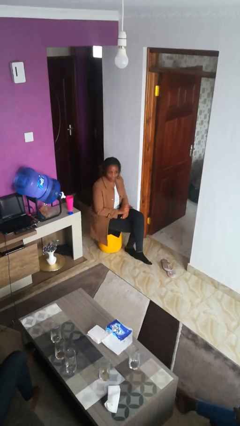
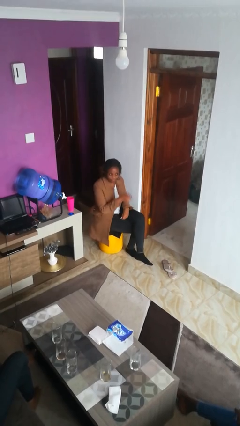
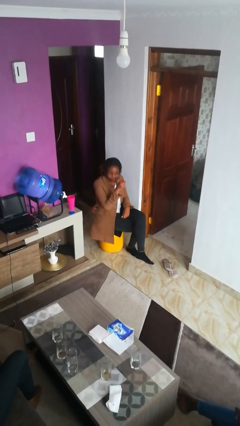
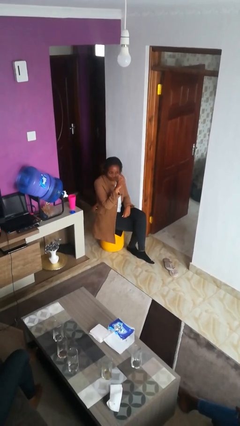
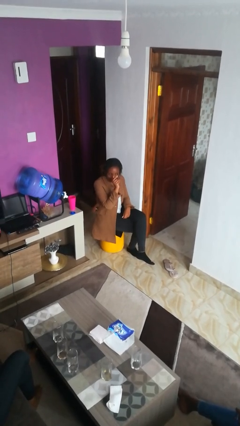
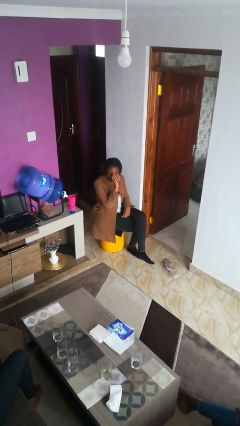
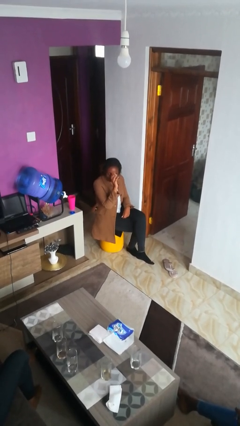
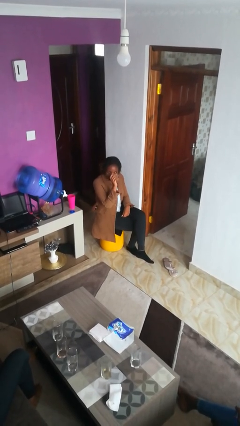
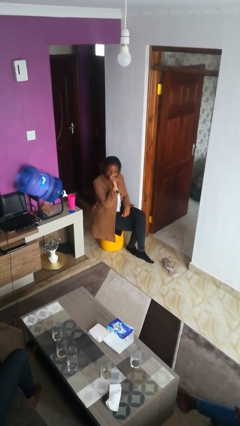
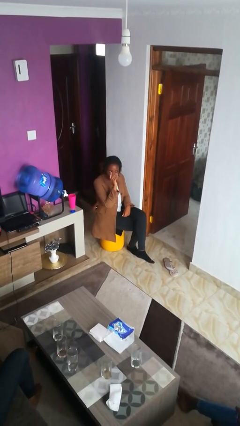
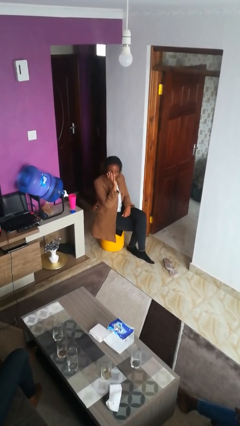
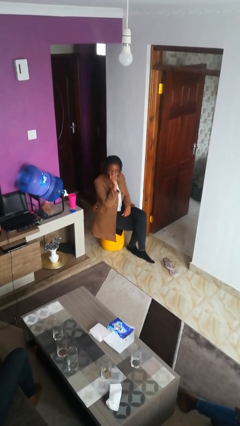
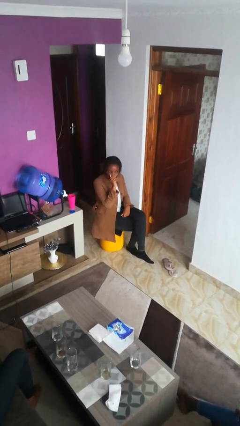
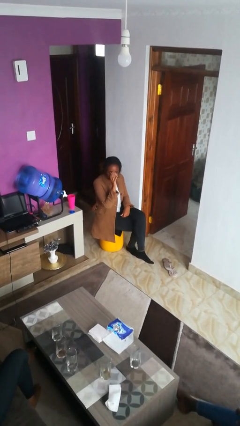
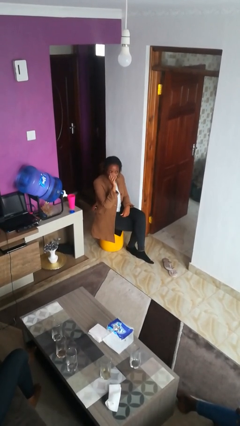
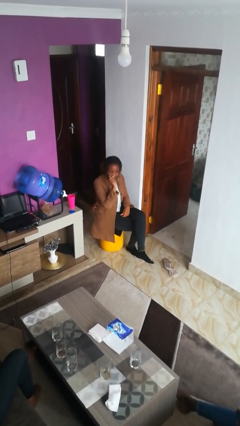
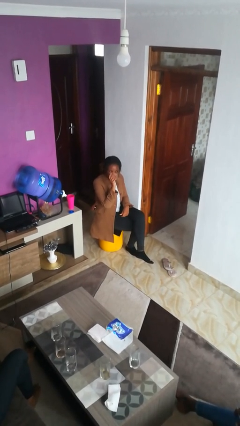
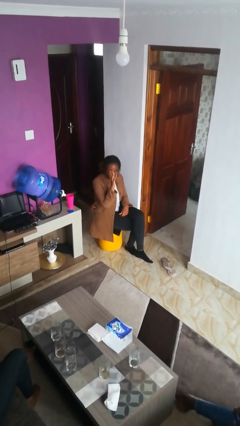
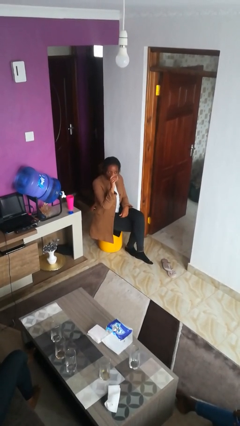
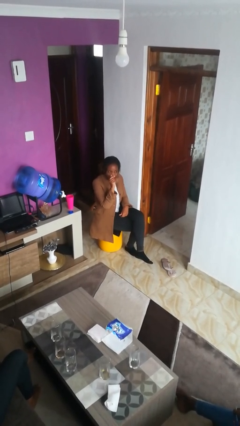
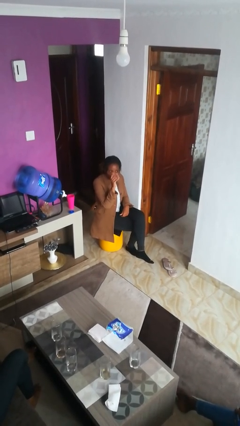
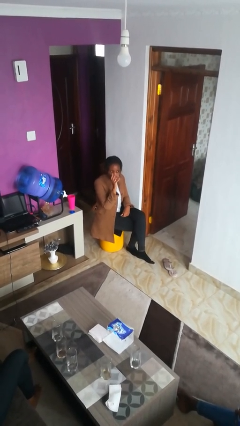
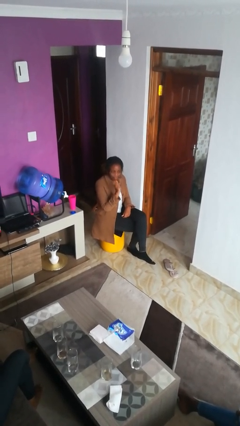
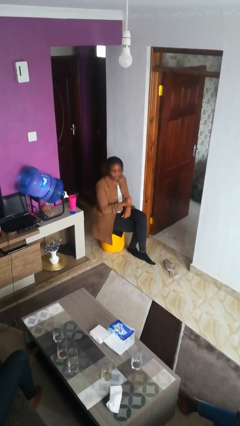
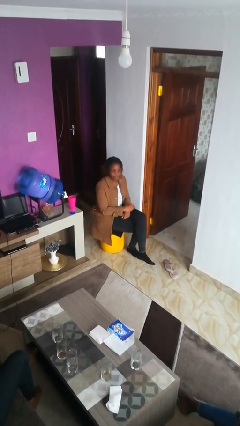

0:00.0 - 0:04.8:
person gestures come here

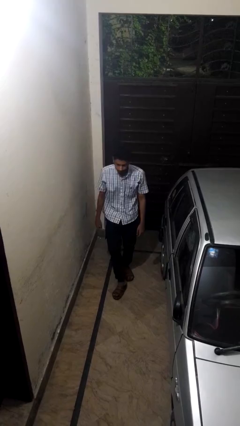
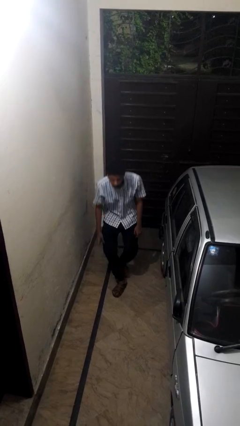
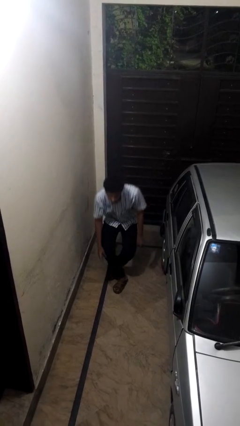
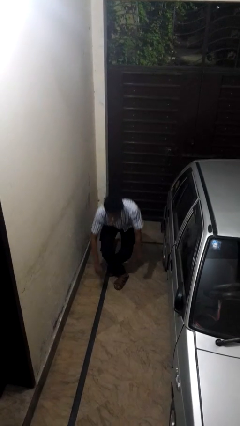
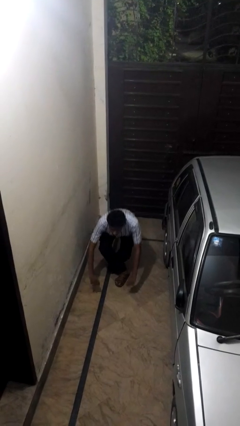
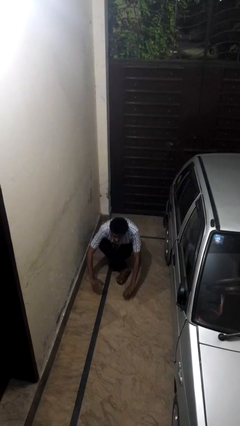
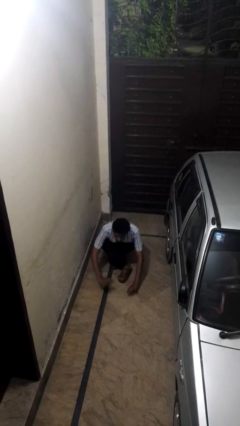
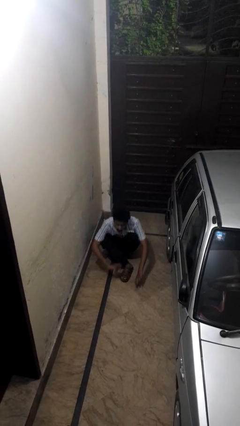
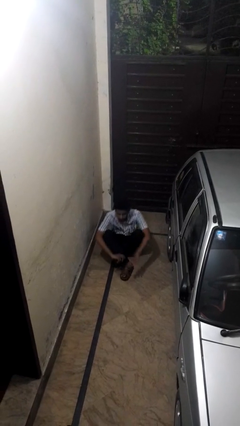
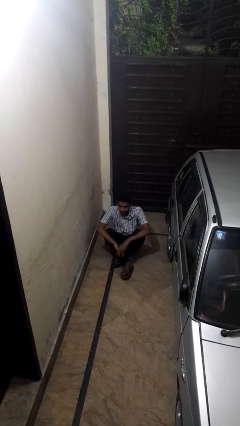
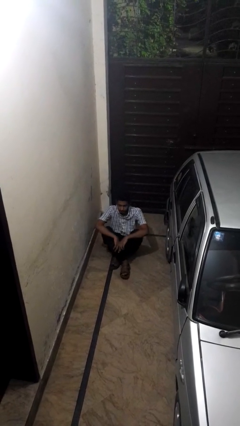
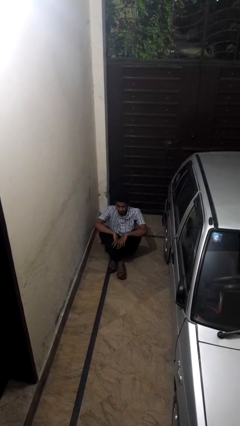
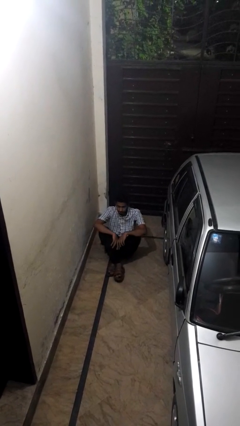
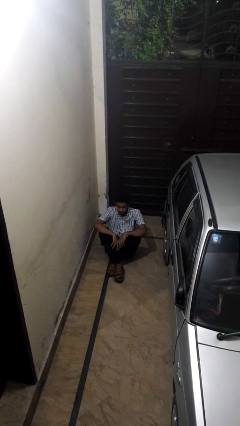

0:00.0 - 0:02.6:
person sits crisscross

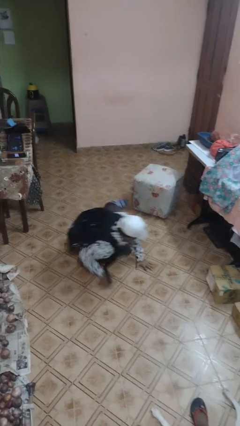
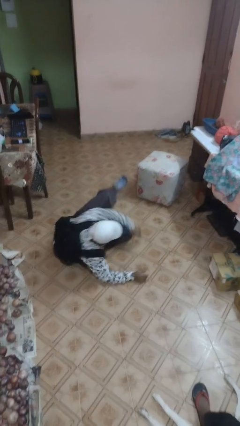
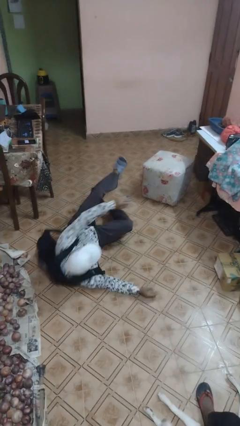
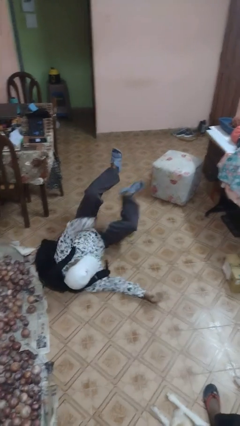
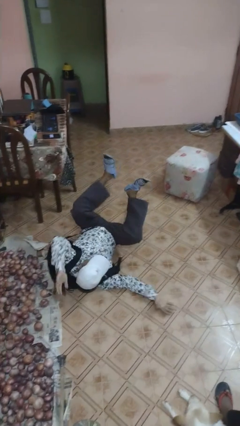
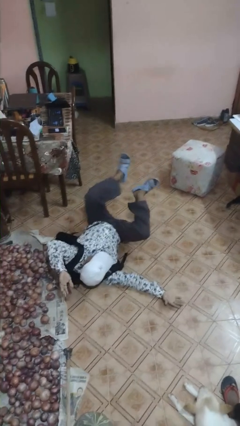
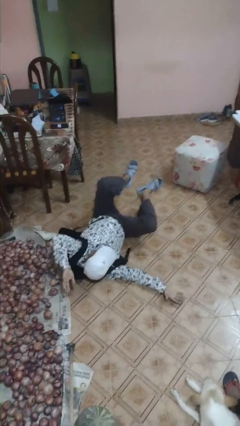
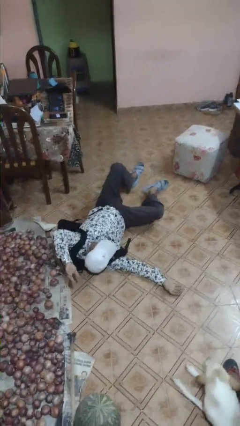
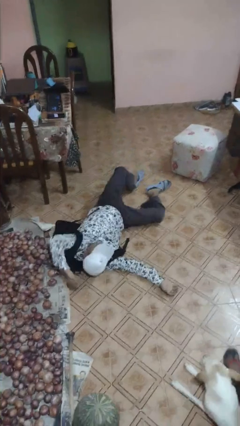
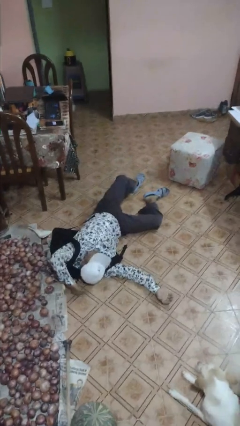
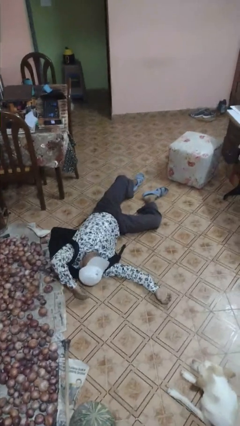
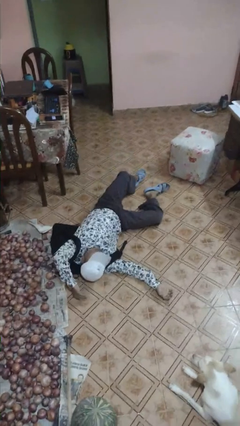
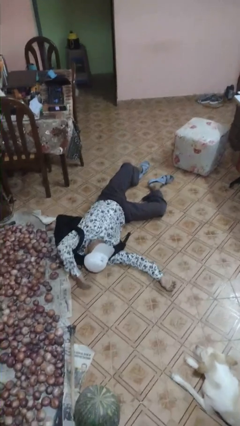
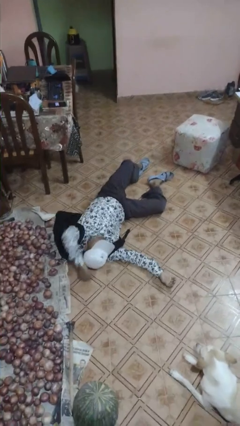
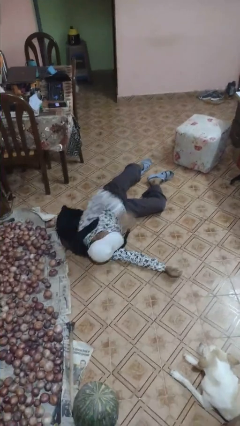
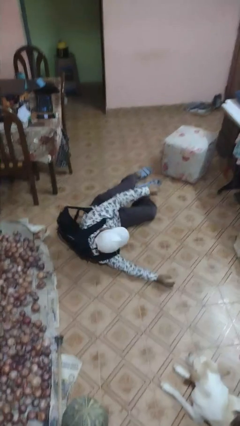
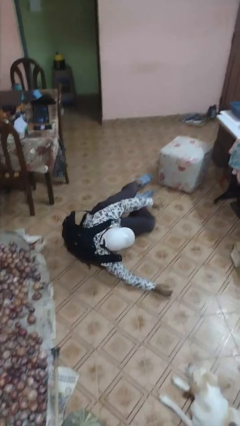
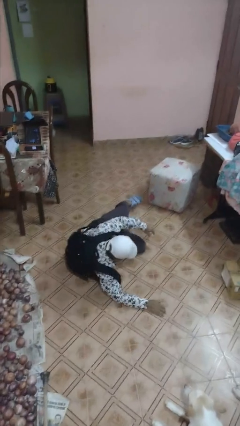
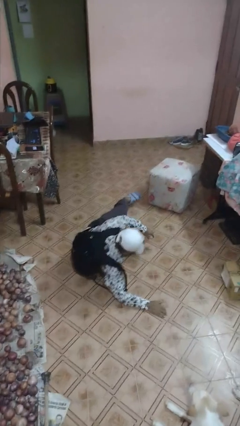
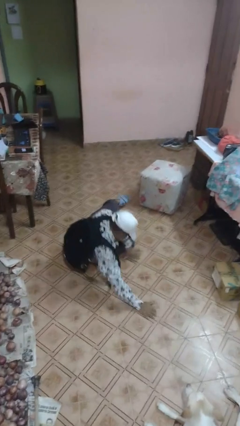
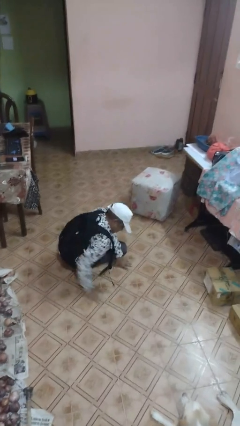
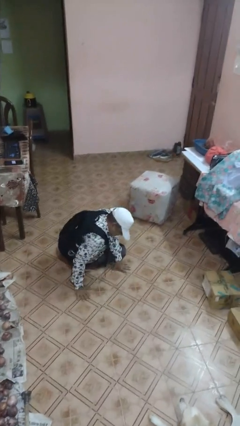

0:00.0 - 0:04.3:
person lies down on floor

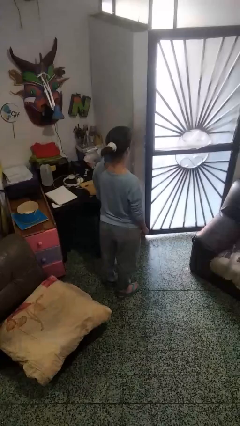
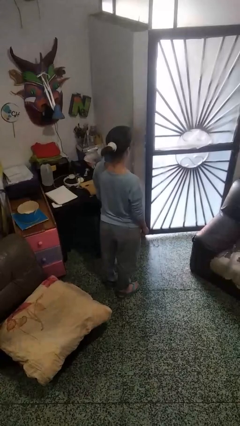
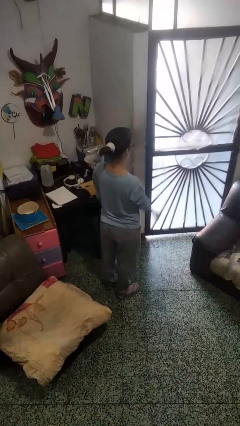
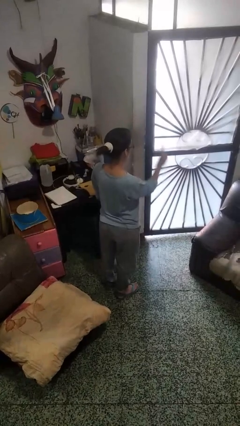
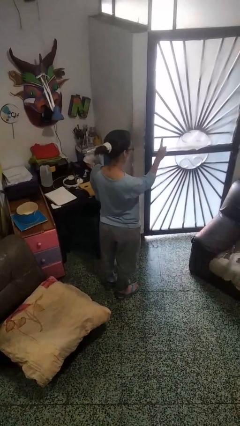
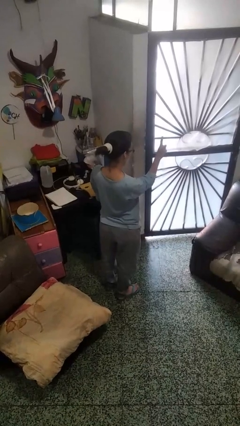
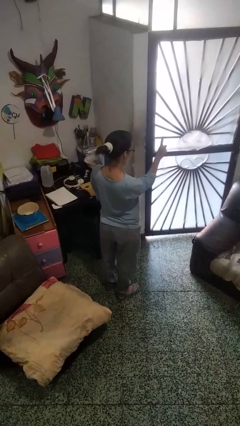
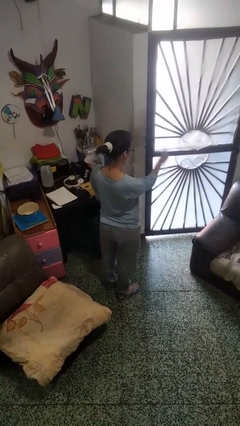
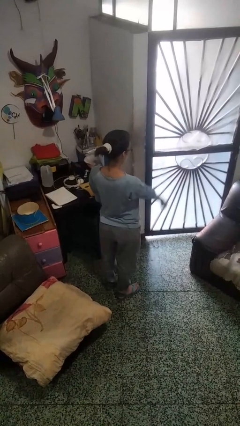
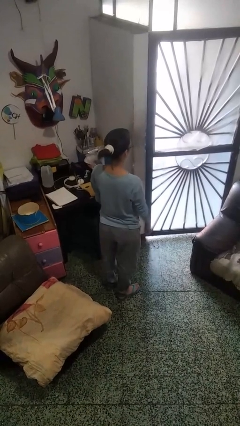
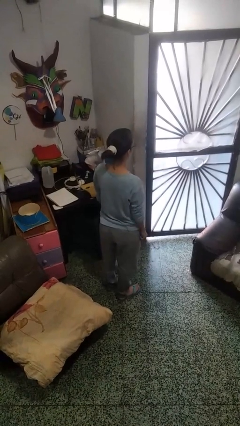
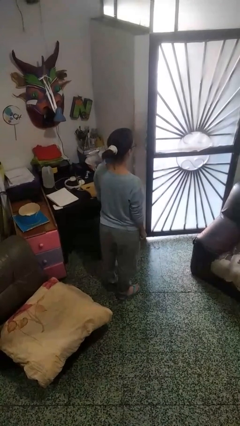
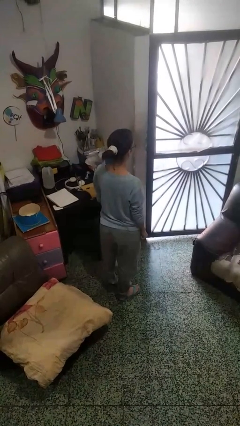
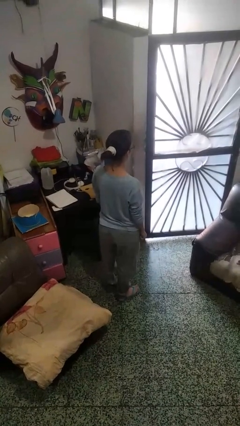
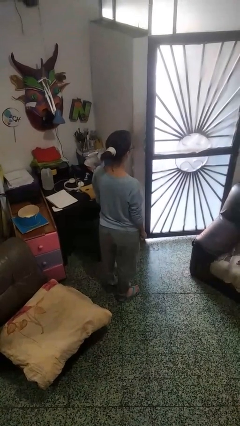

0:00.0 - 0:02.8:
person gestures number one

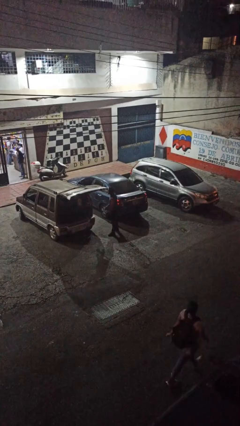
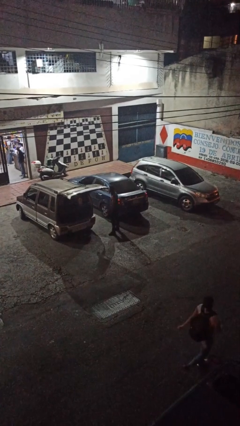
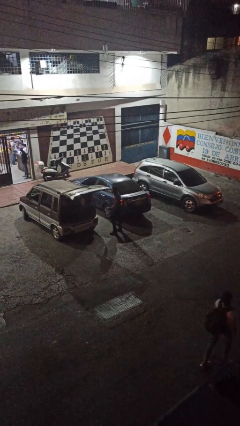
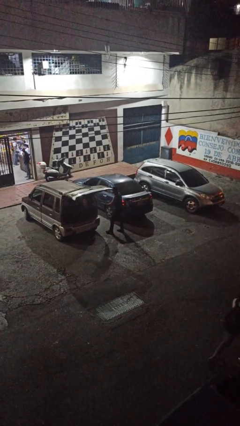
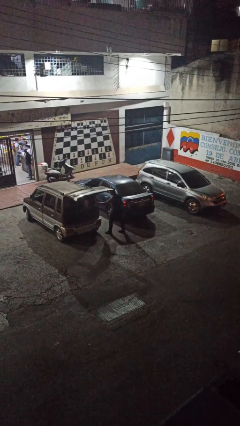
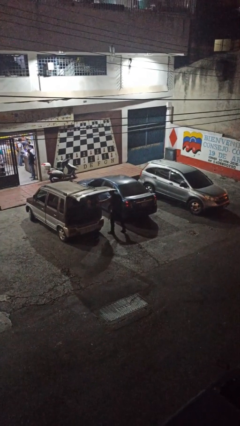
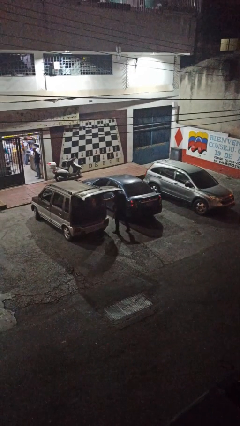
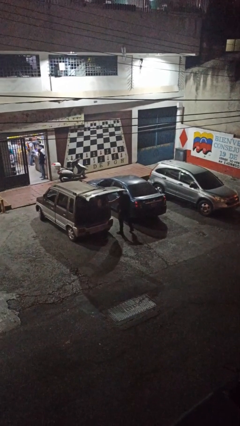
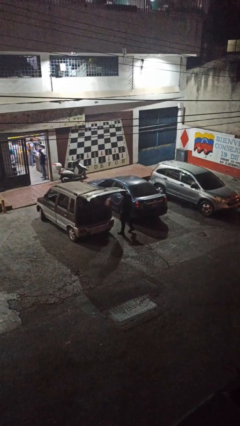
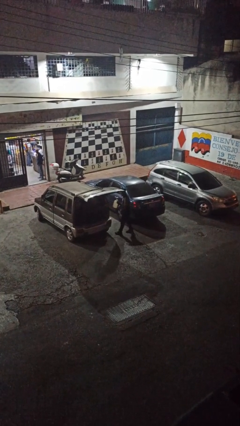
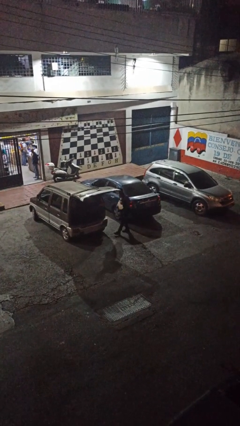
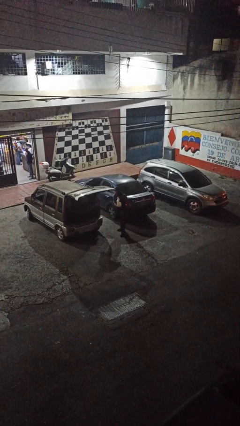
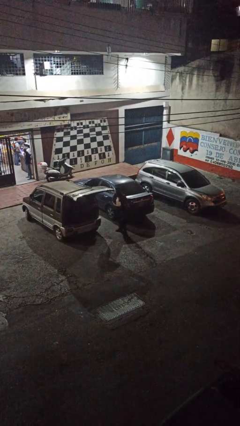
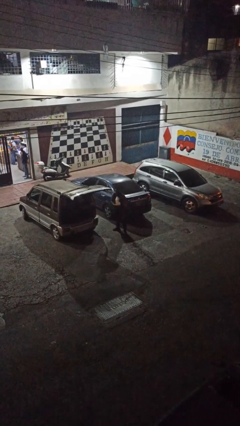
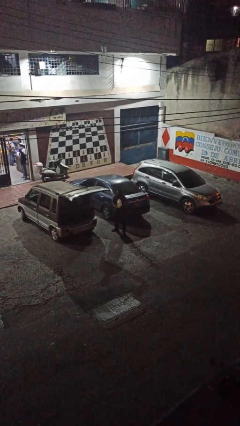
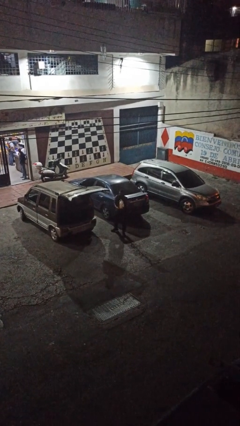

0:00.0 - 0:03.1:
person unloads car

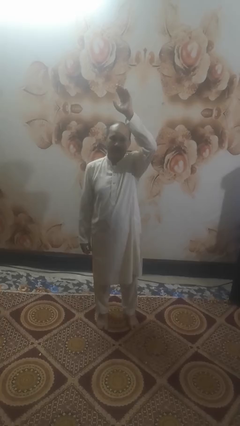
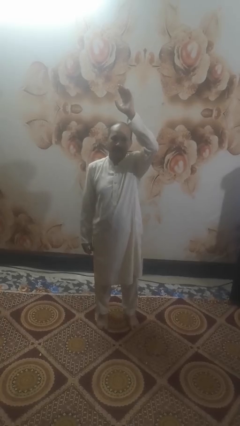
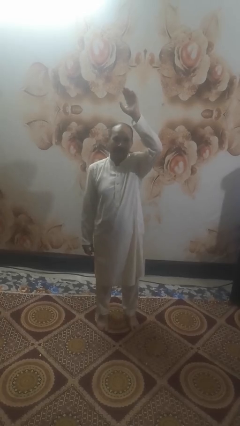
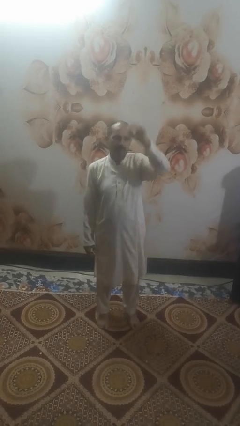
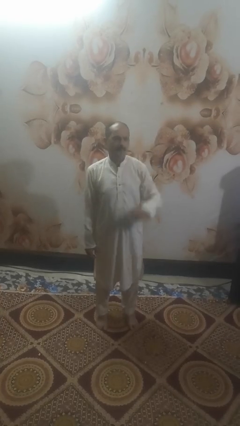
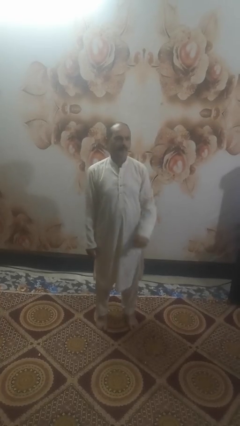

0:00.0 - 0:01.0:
person gestures lower hand
